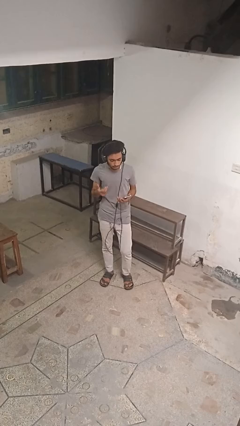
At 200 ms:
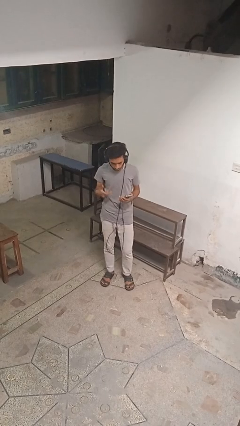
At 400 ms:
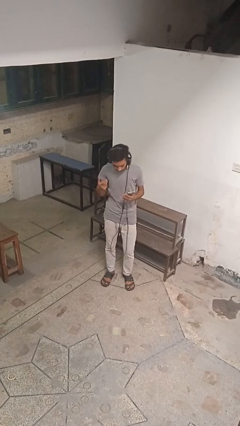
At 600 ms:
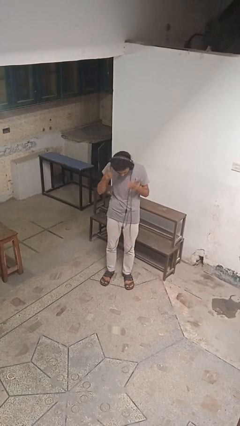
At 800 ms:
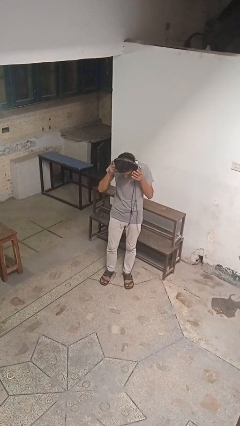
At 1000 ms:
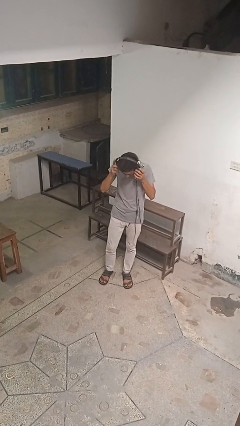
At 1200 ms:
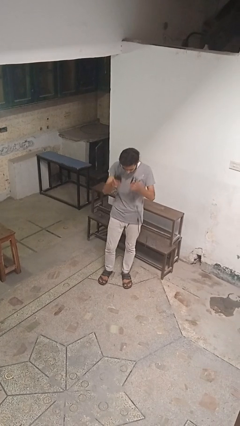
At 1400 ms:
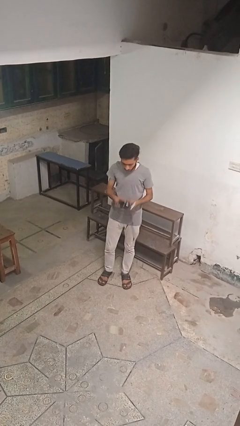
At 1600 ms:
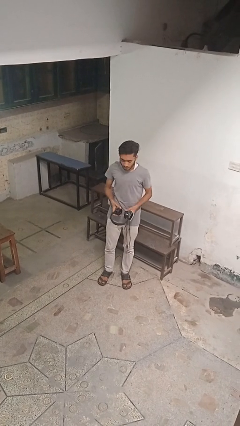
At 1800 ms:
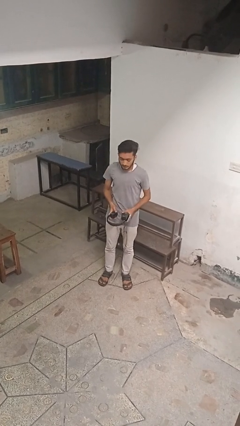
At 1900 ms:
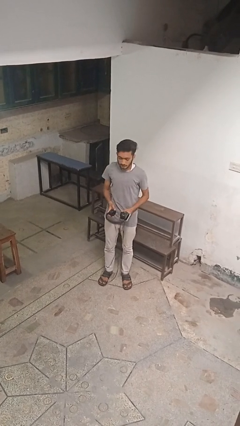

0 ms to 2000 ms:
person takes off headphones

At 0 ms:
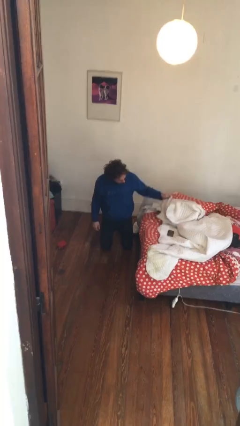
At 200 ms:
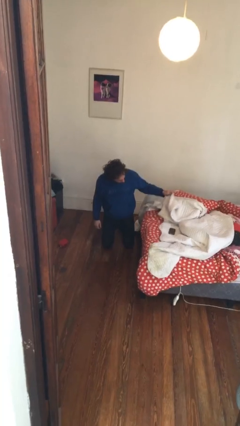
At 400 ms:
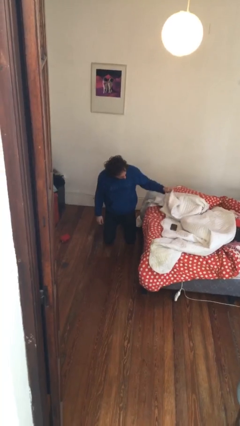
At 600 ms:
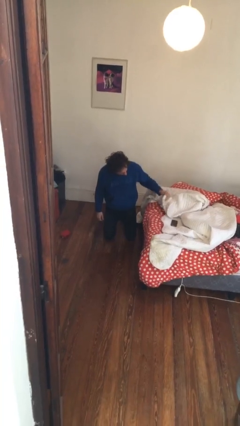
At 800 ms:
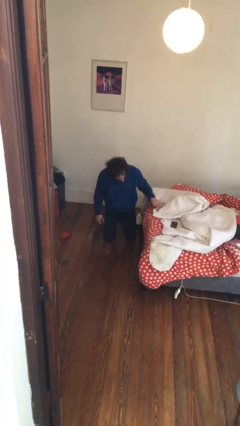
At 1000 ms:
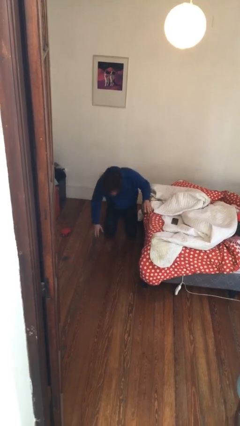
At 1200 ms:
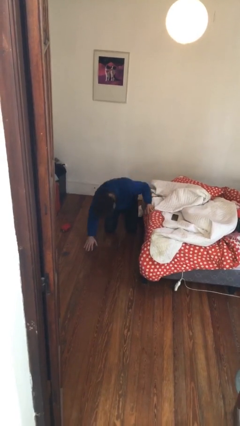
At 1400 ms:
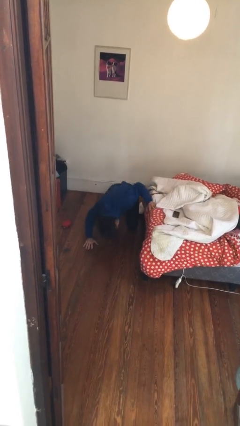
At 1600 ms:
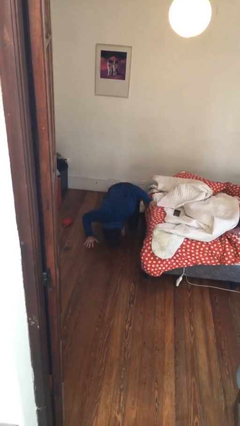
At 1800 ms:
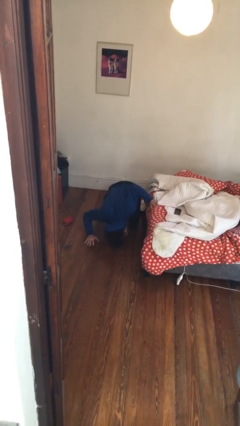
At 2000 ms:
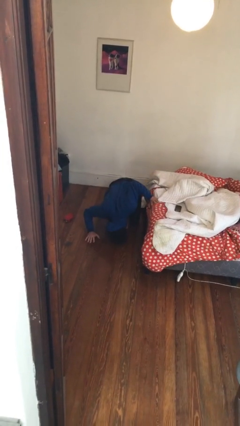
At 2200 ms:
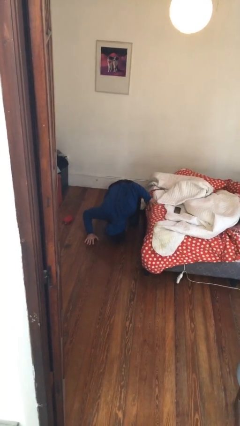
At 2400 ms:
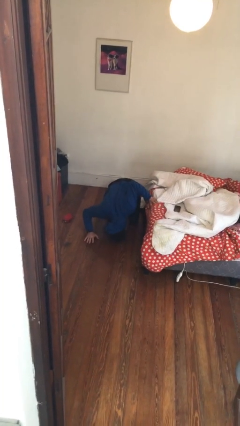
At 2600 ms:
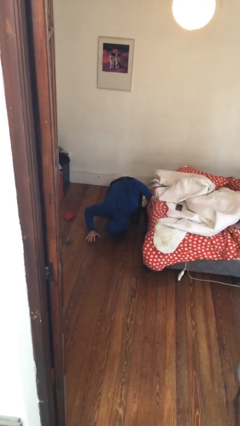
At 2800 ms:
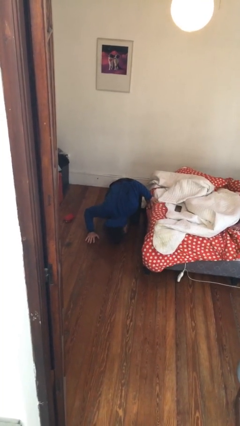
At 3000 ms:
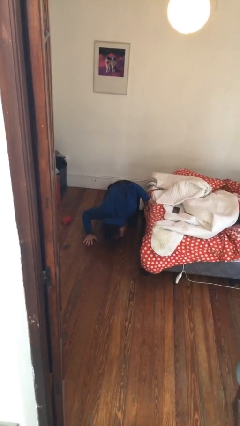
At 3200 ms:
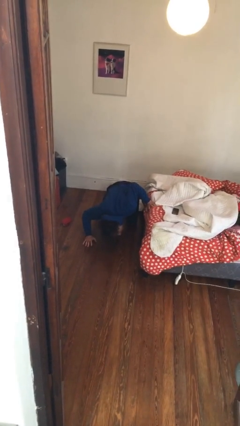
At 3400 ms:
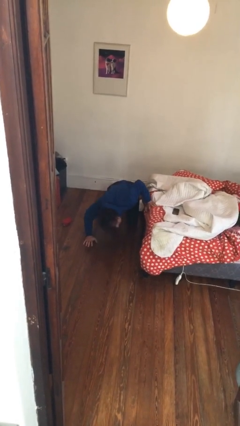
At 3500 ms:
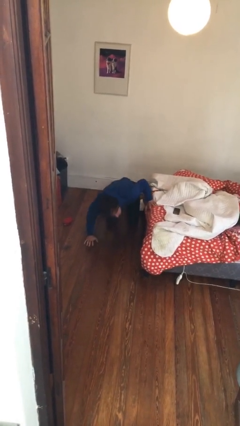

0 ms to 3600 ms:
person searches under bed

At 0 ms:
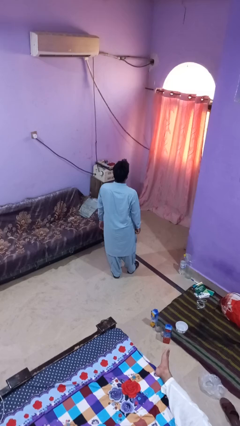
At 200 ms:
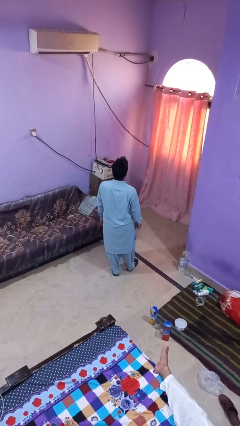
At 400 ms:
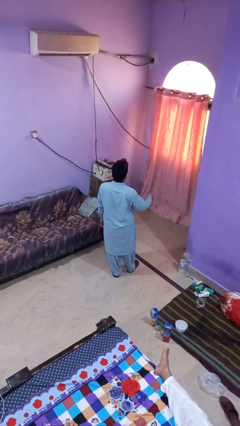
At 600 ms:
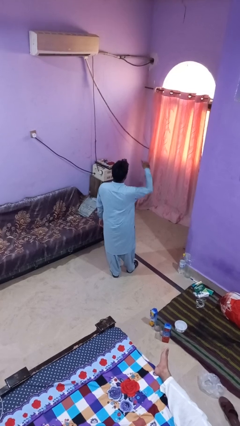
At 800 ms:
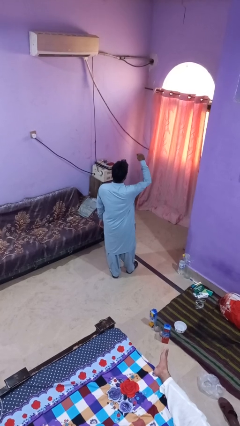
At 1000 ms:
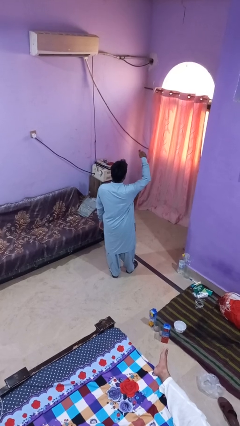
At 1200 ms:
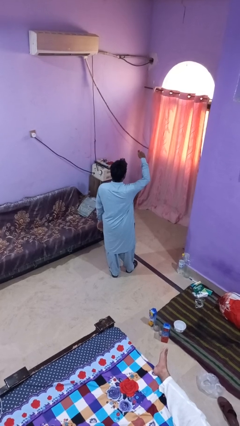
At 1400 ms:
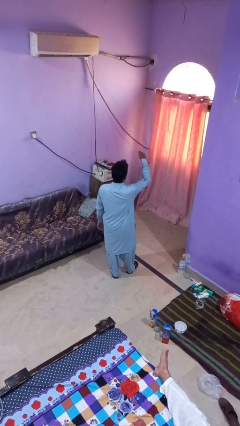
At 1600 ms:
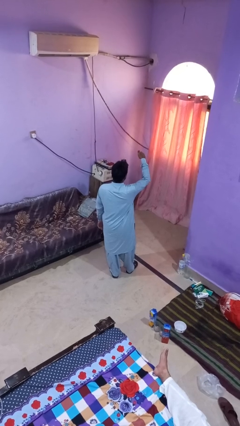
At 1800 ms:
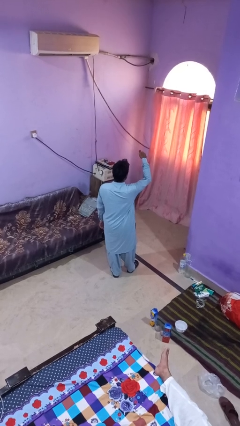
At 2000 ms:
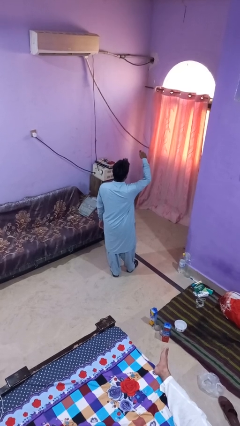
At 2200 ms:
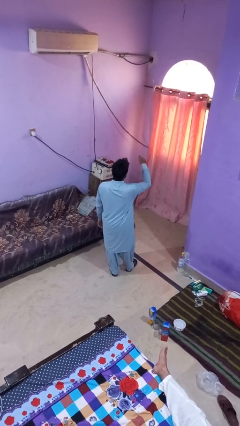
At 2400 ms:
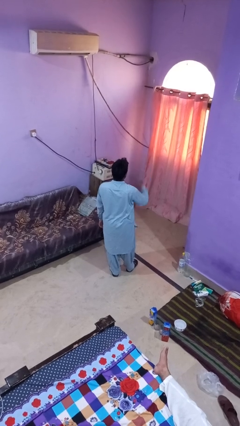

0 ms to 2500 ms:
person gestures thumbs up

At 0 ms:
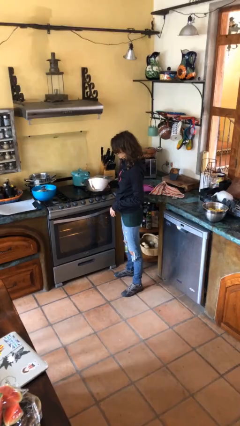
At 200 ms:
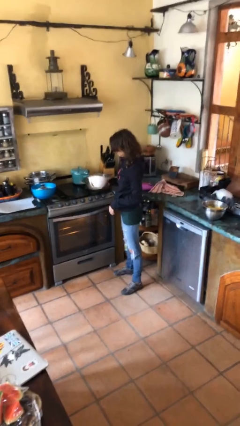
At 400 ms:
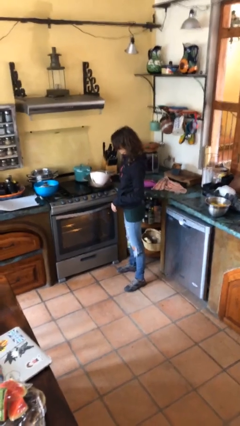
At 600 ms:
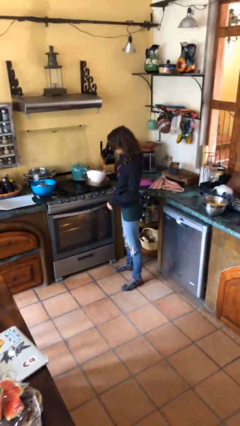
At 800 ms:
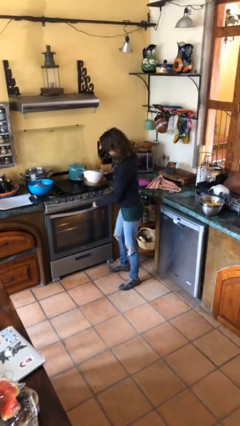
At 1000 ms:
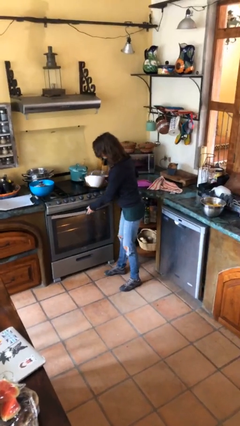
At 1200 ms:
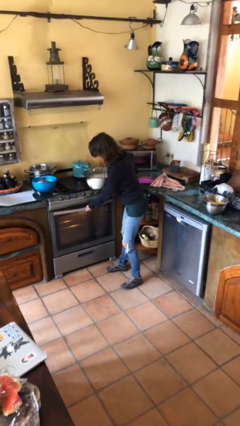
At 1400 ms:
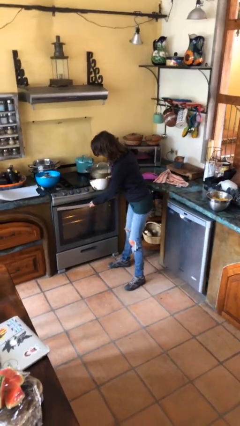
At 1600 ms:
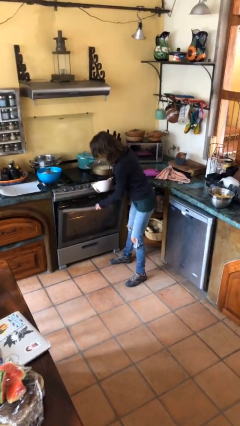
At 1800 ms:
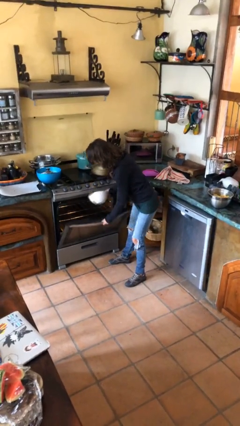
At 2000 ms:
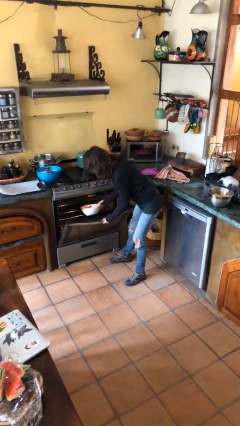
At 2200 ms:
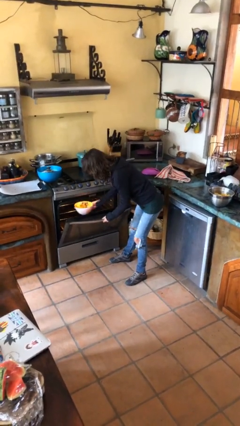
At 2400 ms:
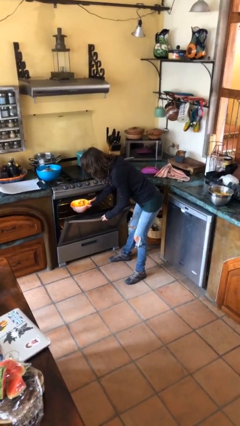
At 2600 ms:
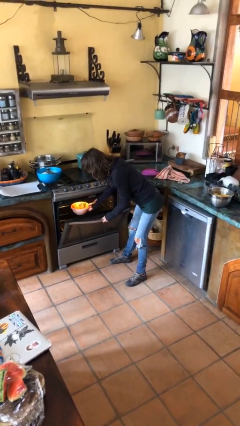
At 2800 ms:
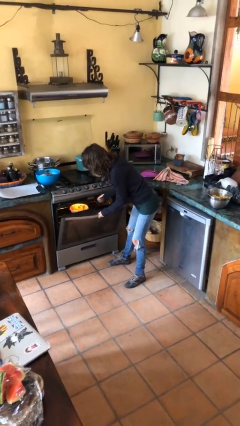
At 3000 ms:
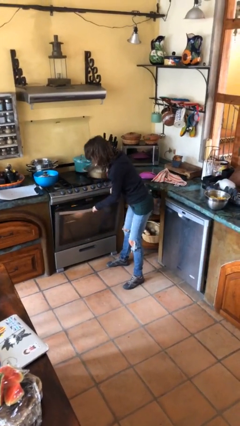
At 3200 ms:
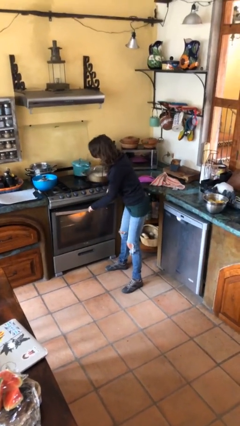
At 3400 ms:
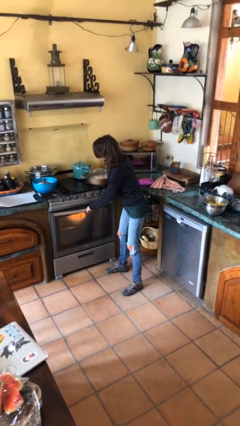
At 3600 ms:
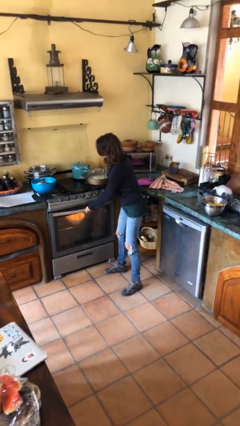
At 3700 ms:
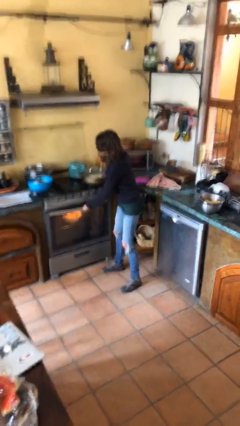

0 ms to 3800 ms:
person puts object into oven

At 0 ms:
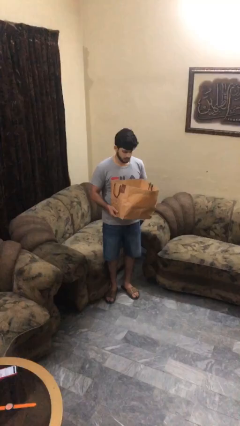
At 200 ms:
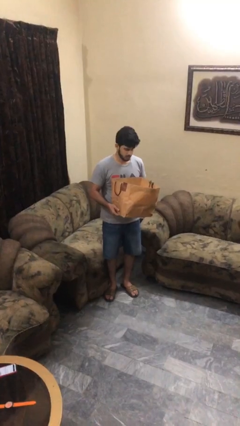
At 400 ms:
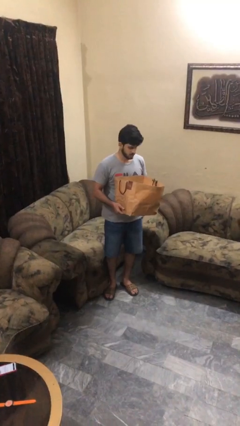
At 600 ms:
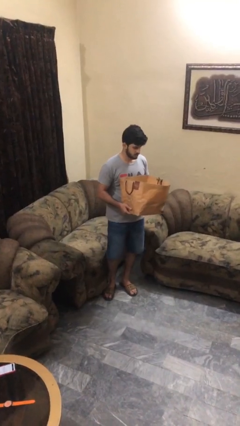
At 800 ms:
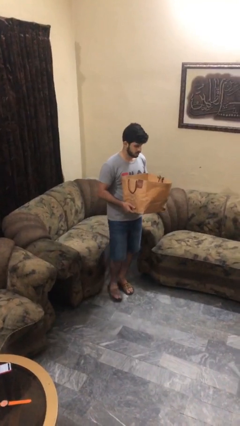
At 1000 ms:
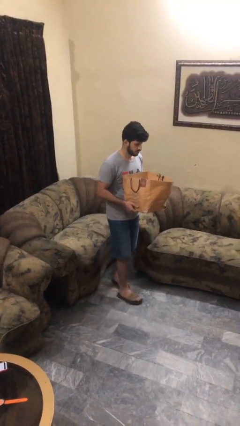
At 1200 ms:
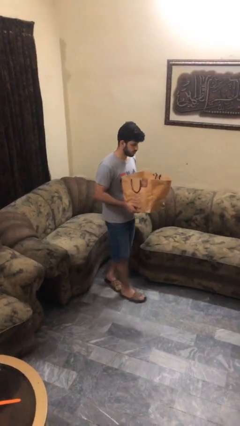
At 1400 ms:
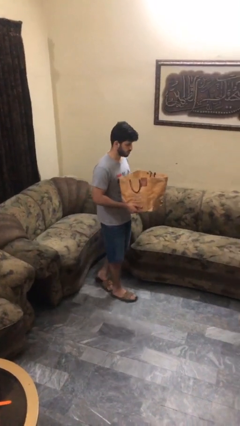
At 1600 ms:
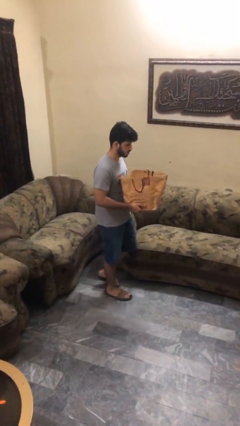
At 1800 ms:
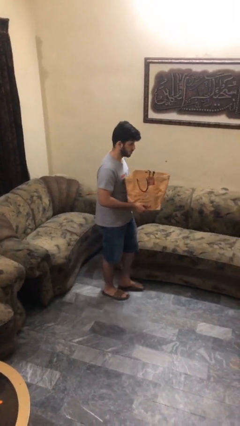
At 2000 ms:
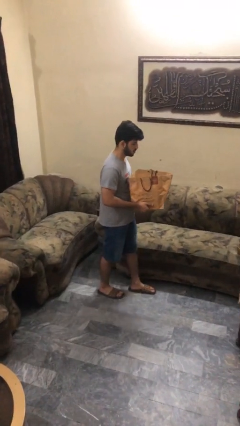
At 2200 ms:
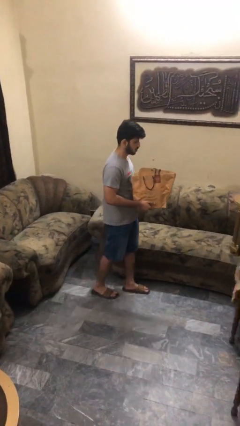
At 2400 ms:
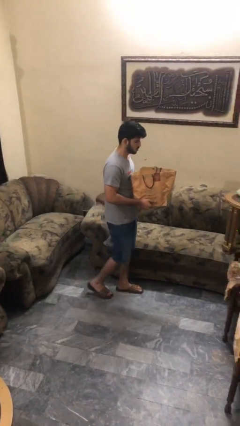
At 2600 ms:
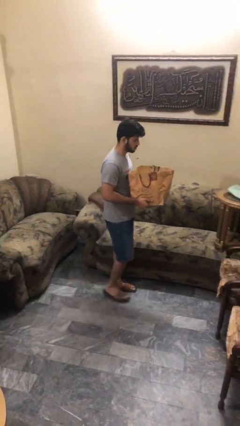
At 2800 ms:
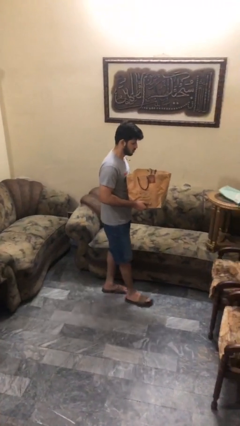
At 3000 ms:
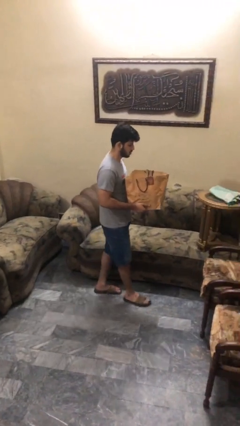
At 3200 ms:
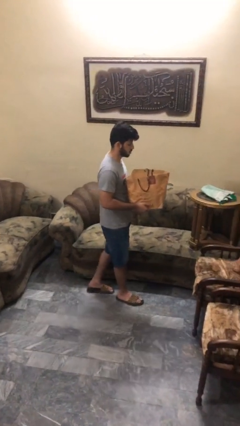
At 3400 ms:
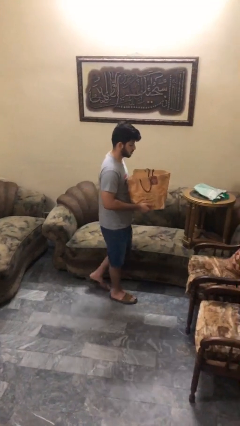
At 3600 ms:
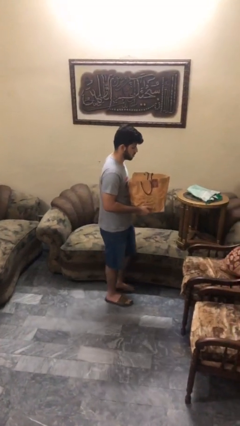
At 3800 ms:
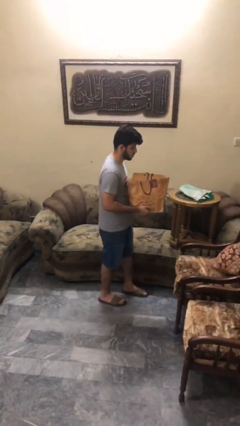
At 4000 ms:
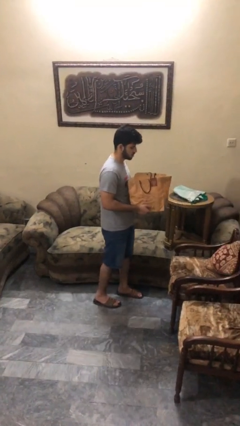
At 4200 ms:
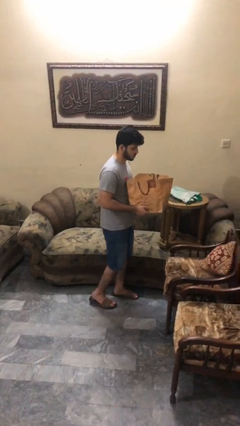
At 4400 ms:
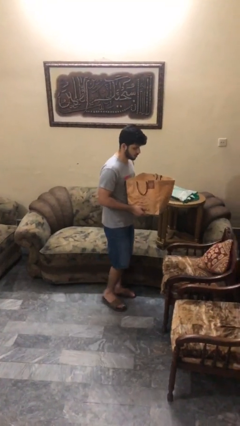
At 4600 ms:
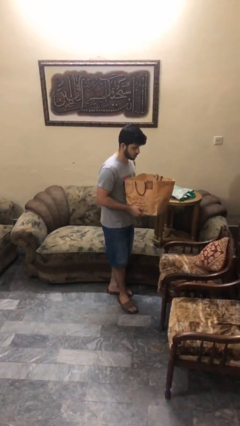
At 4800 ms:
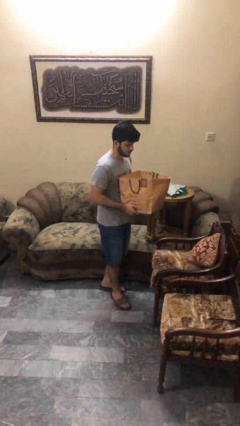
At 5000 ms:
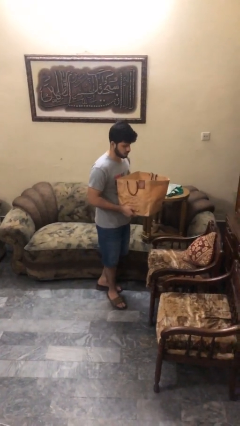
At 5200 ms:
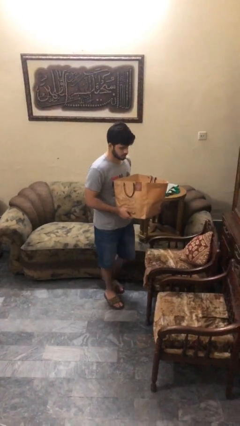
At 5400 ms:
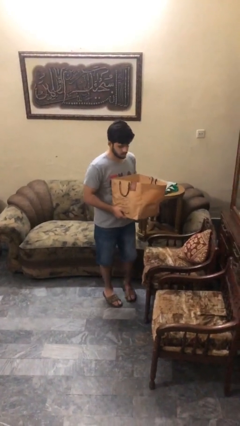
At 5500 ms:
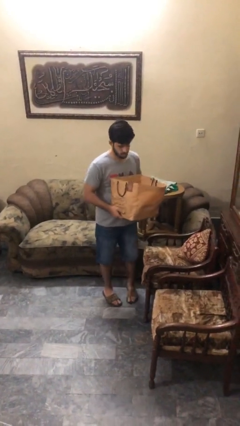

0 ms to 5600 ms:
person carries groceries
